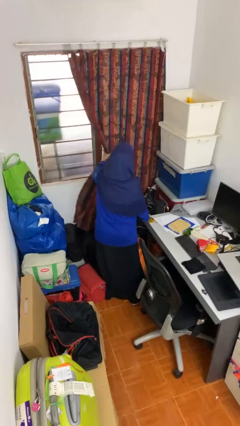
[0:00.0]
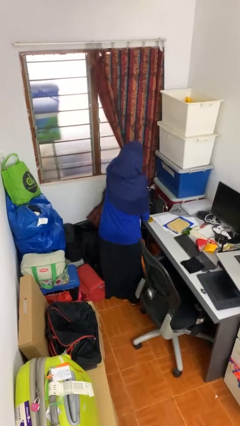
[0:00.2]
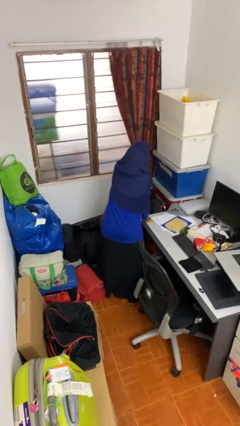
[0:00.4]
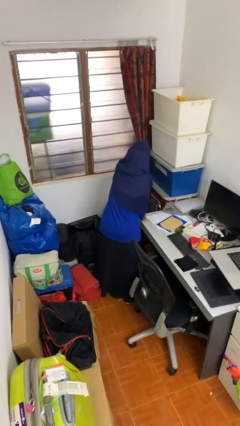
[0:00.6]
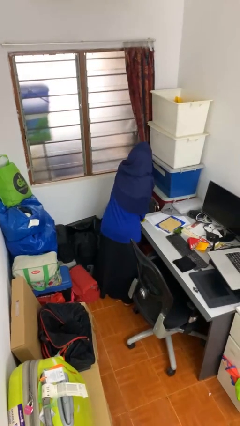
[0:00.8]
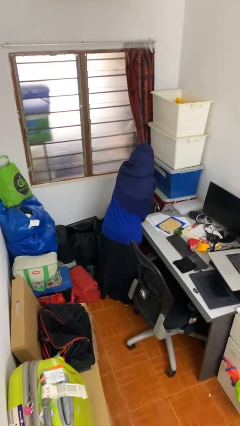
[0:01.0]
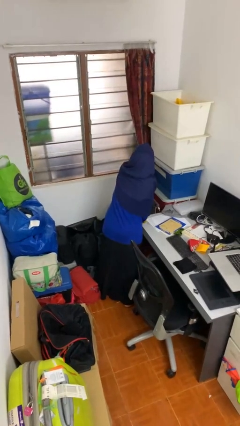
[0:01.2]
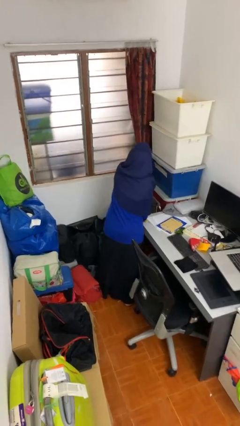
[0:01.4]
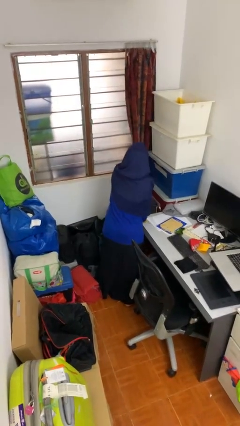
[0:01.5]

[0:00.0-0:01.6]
person opens curtains

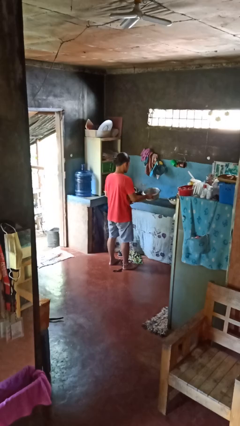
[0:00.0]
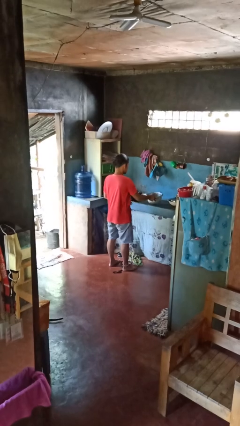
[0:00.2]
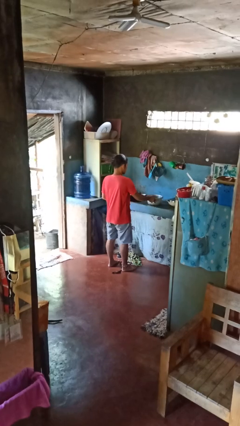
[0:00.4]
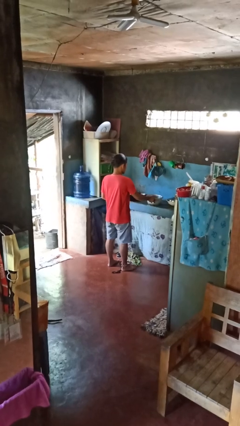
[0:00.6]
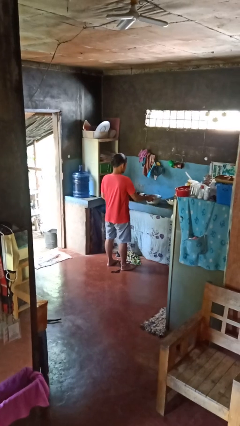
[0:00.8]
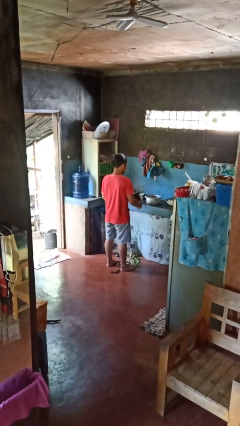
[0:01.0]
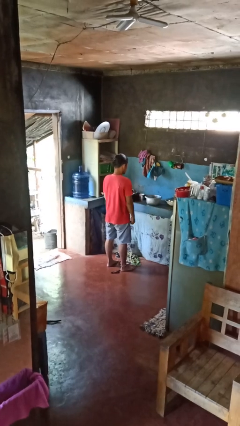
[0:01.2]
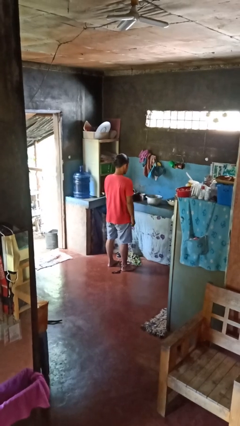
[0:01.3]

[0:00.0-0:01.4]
person puts down object on countertop

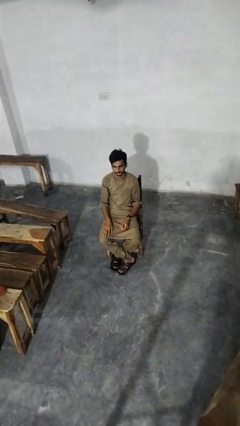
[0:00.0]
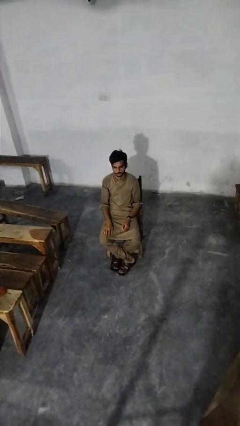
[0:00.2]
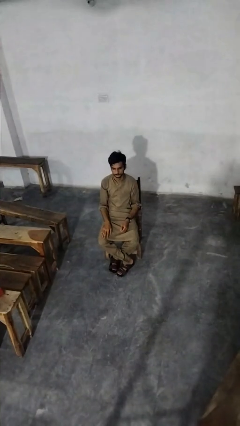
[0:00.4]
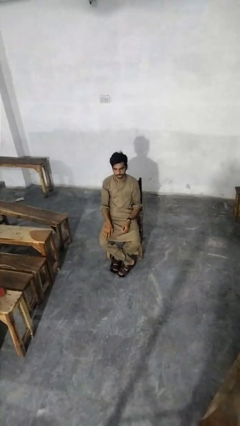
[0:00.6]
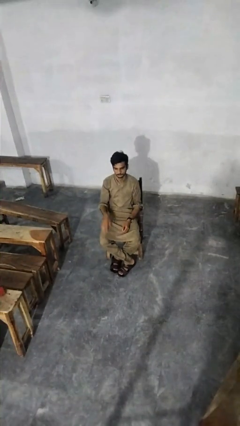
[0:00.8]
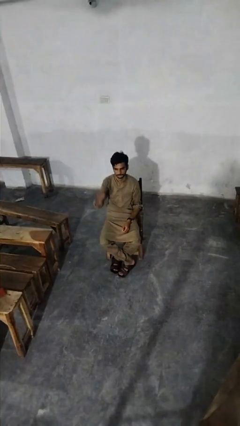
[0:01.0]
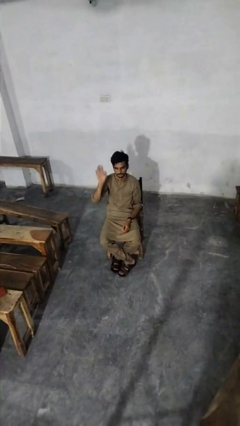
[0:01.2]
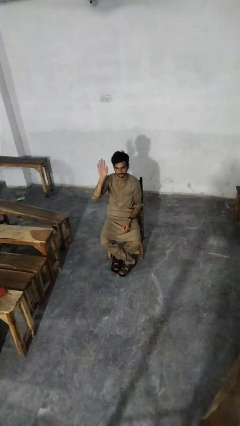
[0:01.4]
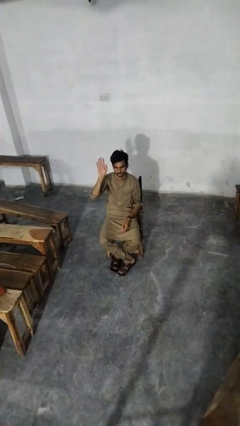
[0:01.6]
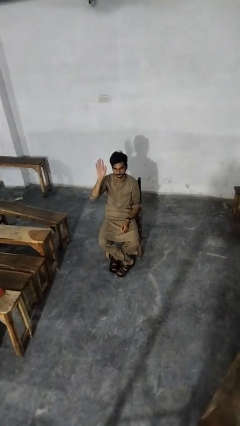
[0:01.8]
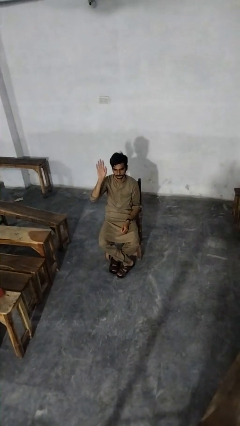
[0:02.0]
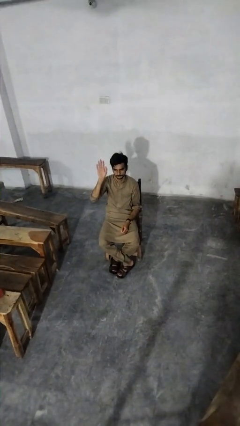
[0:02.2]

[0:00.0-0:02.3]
person gestures raise hand

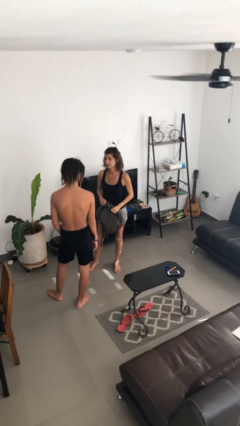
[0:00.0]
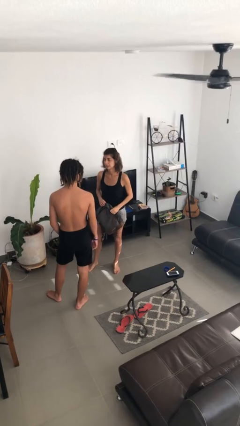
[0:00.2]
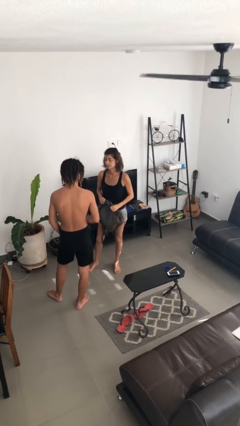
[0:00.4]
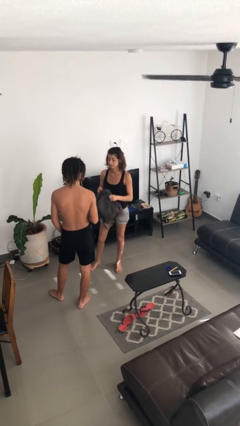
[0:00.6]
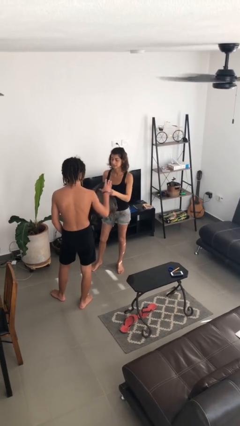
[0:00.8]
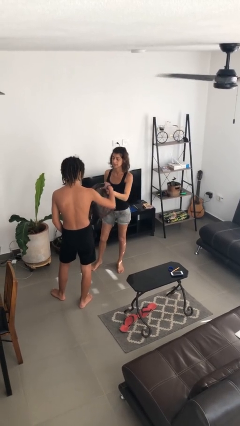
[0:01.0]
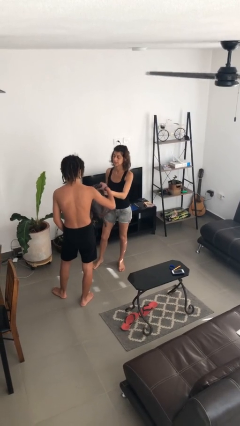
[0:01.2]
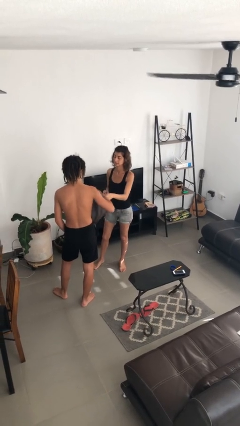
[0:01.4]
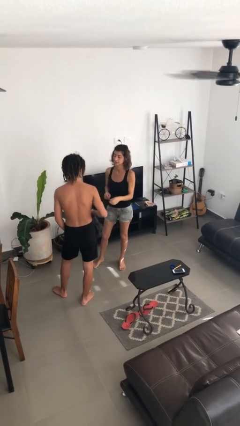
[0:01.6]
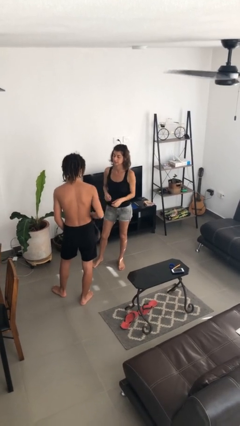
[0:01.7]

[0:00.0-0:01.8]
person transfers object to person

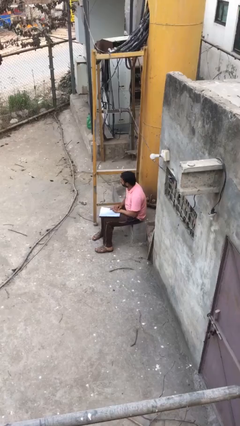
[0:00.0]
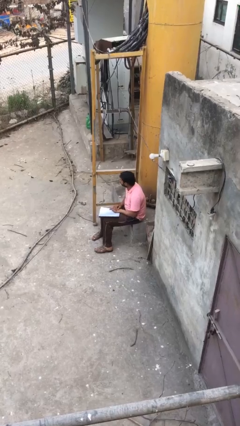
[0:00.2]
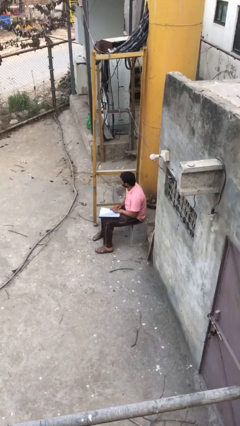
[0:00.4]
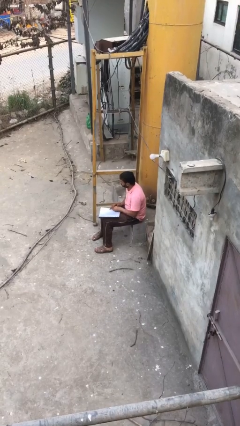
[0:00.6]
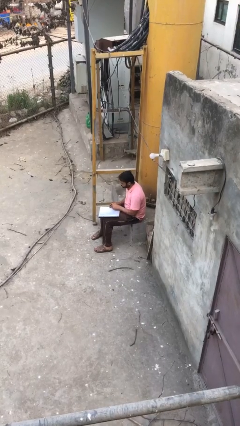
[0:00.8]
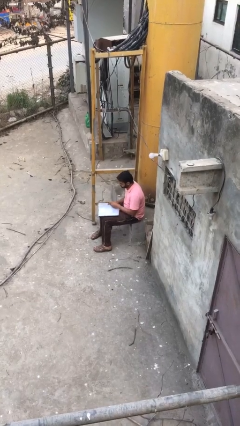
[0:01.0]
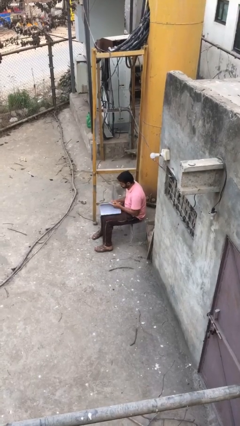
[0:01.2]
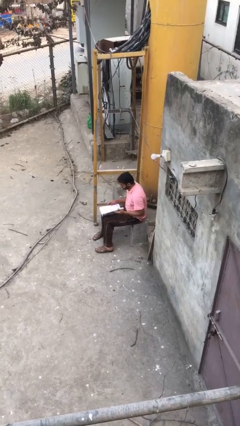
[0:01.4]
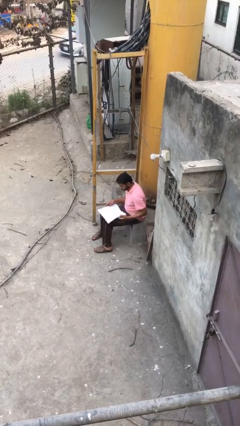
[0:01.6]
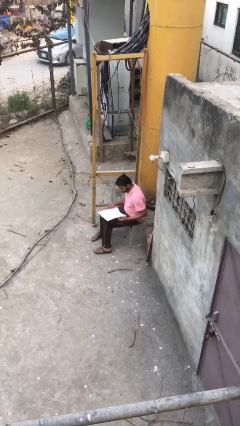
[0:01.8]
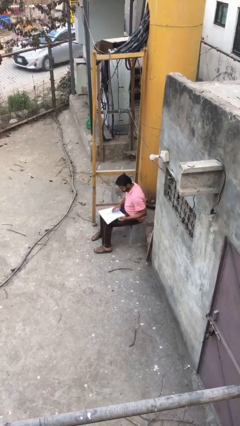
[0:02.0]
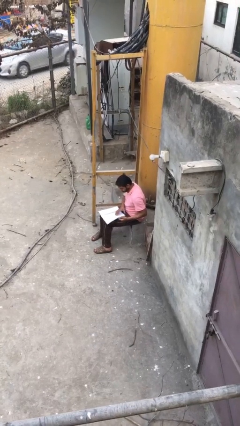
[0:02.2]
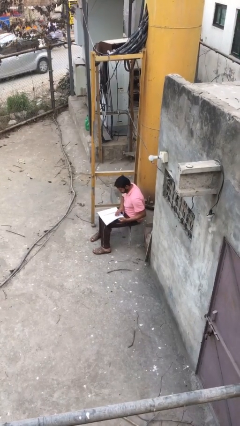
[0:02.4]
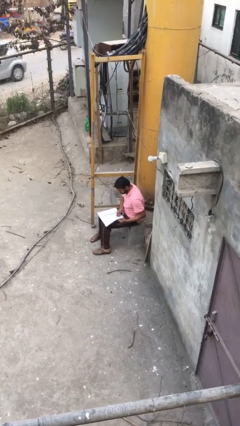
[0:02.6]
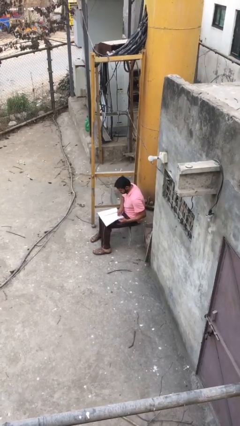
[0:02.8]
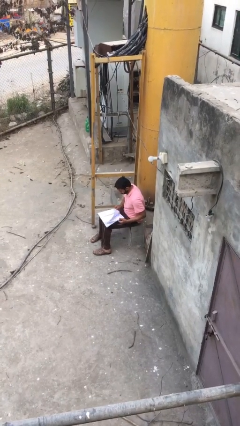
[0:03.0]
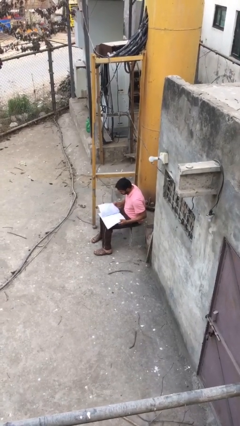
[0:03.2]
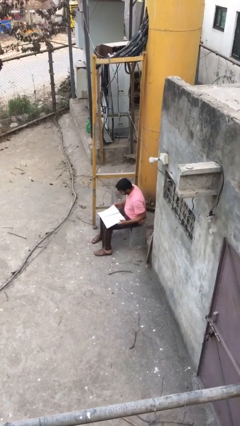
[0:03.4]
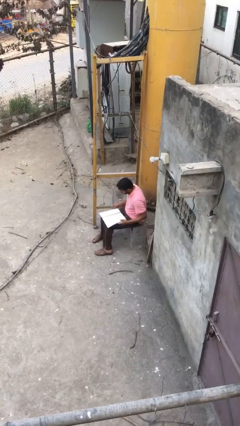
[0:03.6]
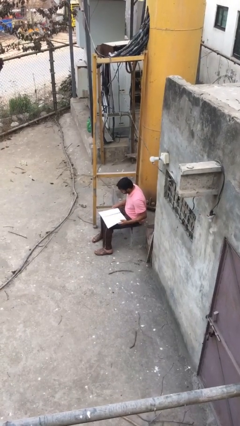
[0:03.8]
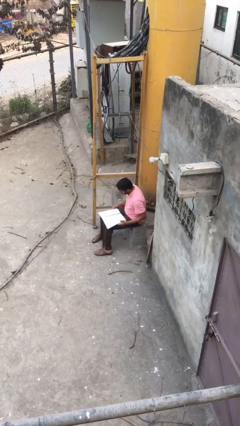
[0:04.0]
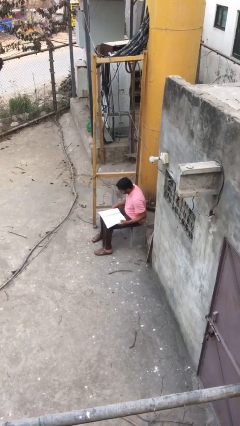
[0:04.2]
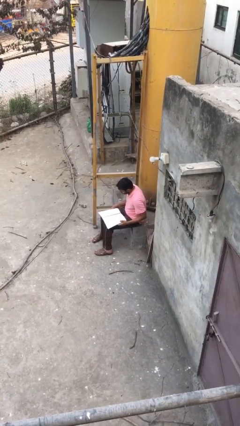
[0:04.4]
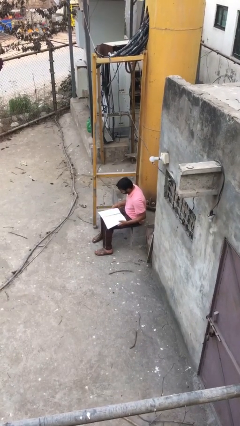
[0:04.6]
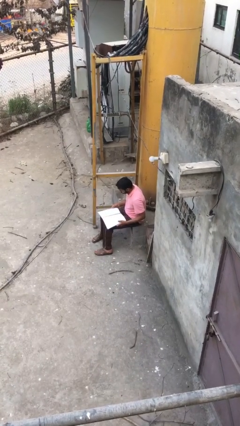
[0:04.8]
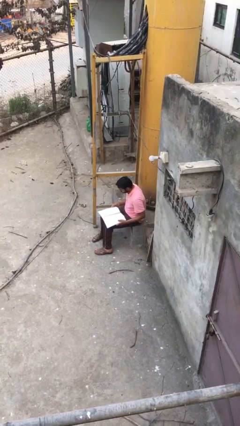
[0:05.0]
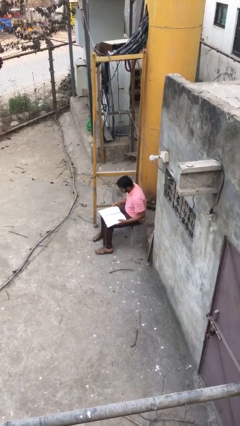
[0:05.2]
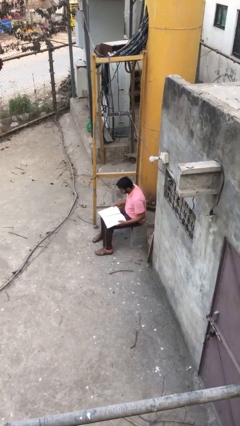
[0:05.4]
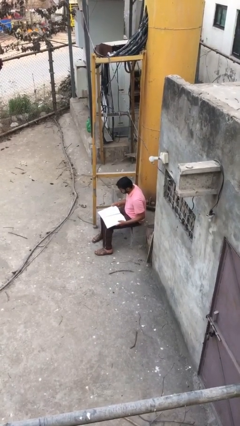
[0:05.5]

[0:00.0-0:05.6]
person reads document

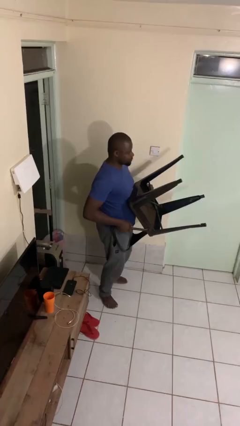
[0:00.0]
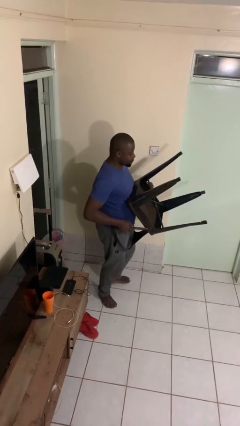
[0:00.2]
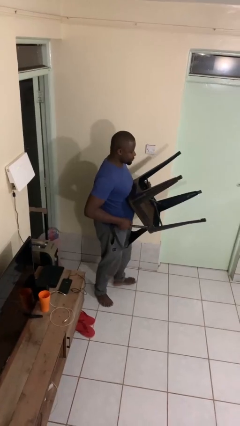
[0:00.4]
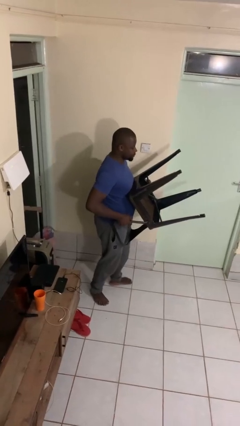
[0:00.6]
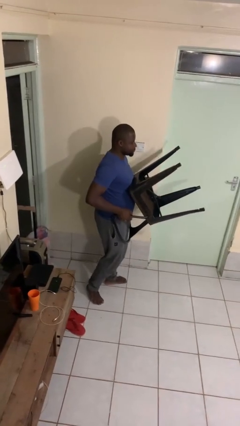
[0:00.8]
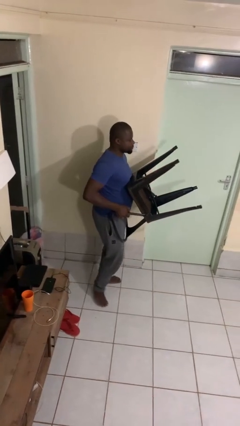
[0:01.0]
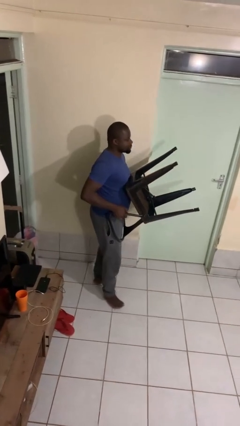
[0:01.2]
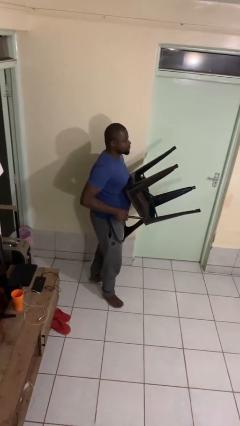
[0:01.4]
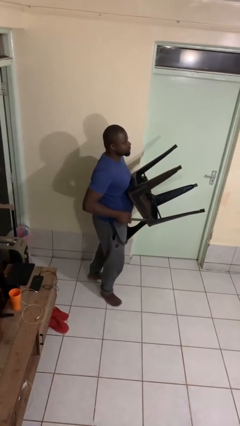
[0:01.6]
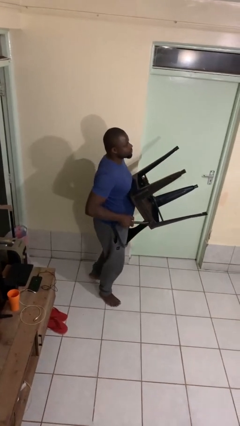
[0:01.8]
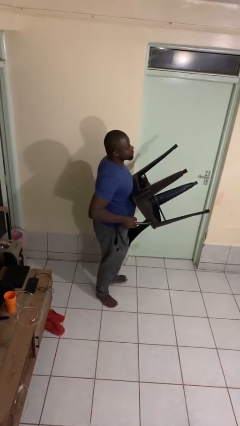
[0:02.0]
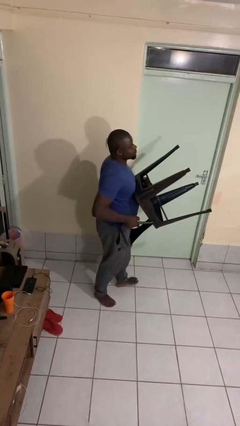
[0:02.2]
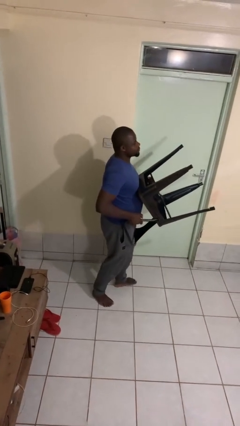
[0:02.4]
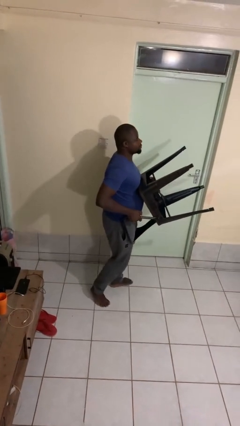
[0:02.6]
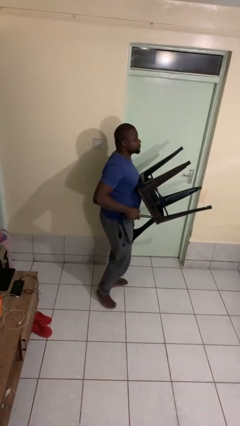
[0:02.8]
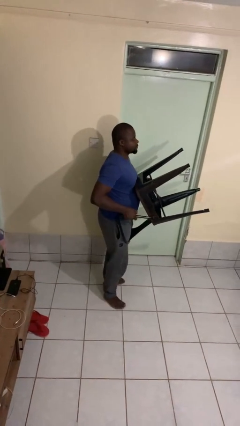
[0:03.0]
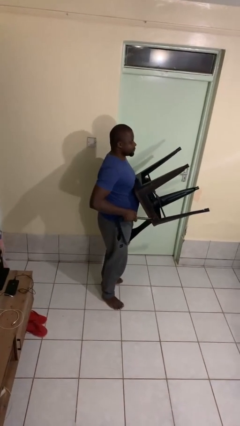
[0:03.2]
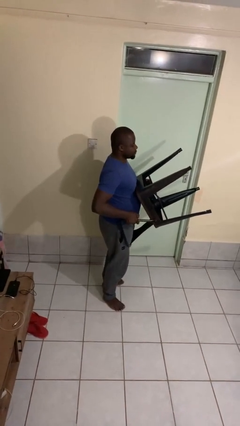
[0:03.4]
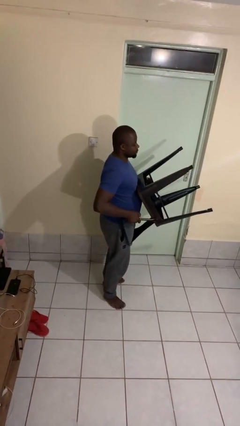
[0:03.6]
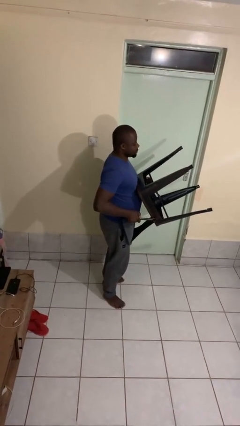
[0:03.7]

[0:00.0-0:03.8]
person carries furniture

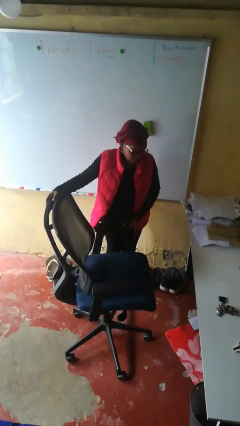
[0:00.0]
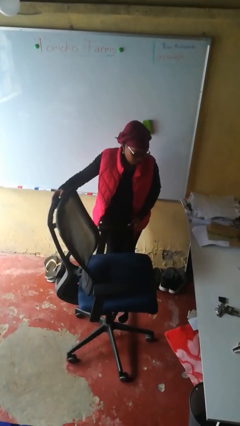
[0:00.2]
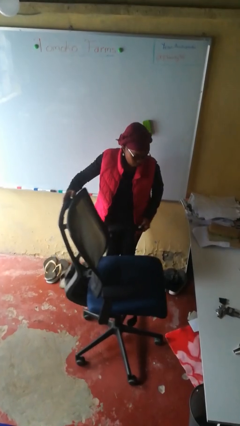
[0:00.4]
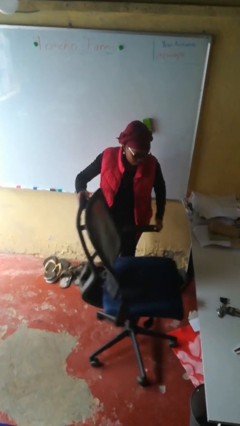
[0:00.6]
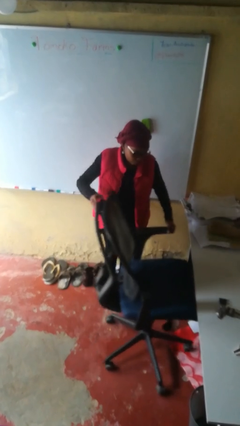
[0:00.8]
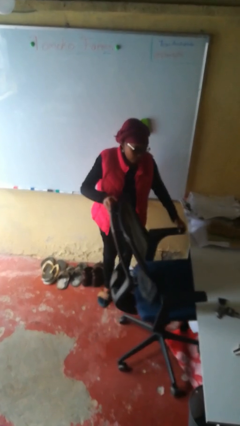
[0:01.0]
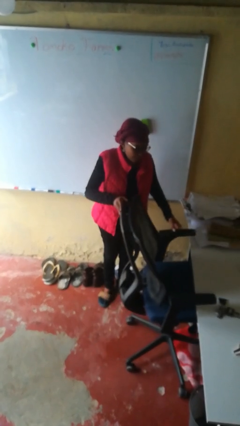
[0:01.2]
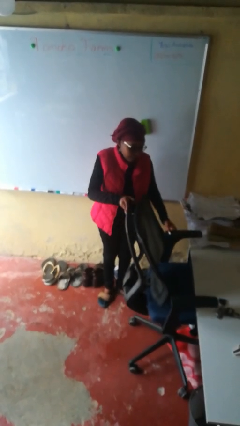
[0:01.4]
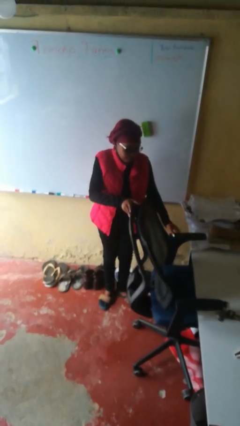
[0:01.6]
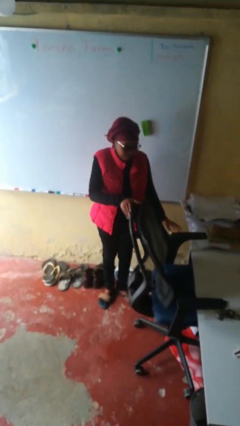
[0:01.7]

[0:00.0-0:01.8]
person pushes in chair
